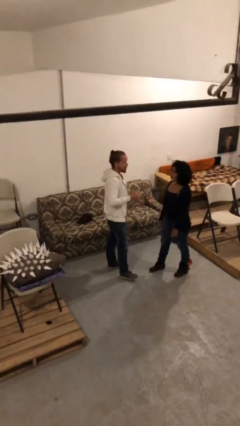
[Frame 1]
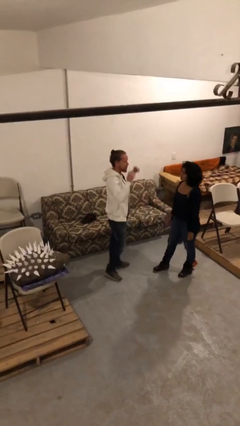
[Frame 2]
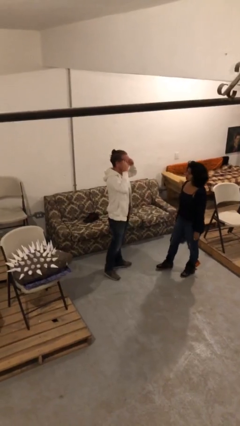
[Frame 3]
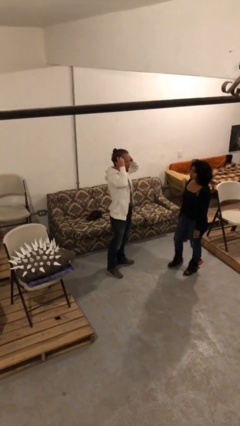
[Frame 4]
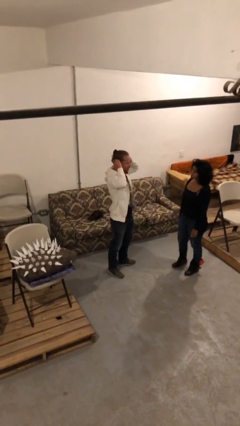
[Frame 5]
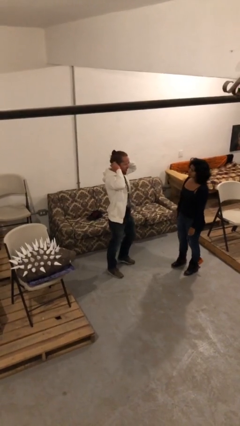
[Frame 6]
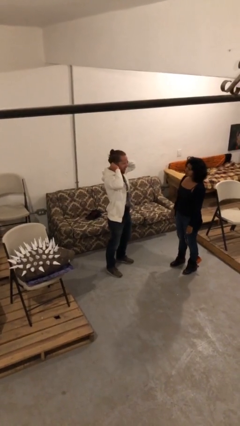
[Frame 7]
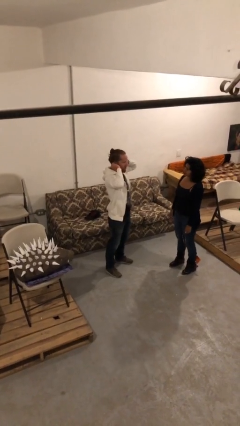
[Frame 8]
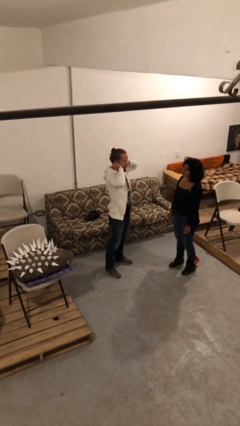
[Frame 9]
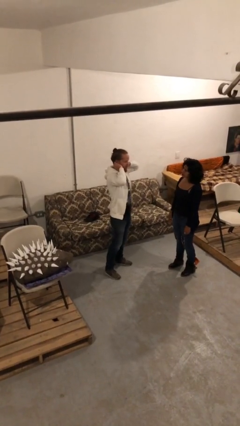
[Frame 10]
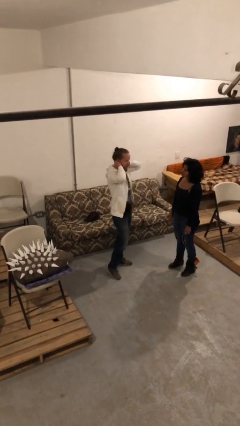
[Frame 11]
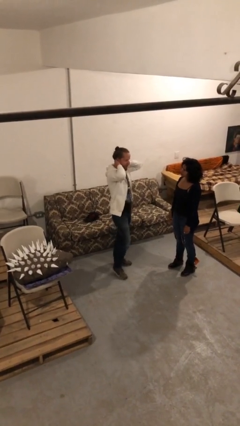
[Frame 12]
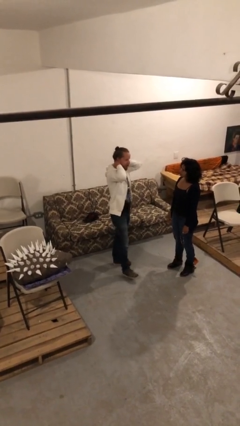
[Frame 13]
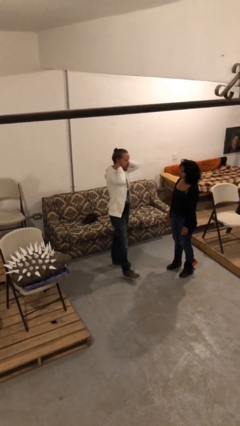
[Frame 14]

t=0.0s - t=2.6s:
person talks to person

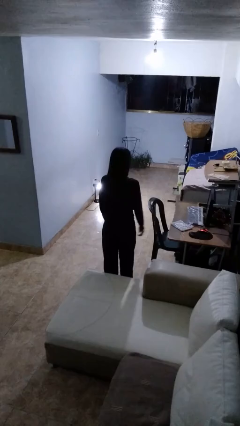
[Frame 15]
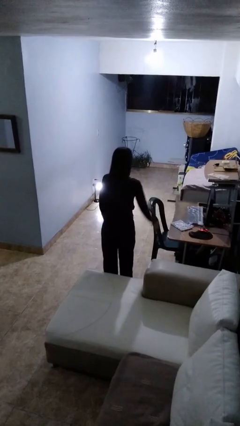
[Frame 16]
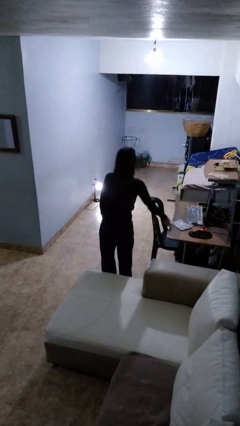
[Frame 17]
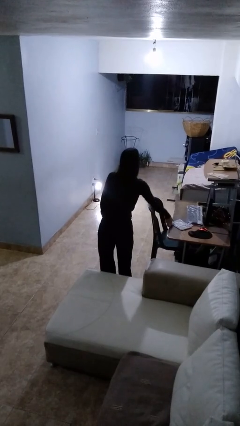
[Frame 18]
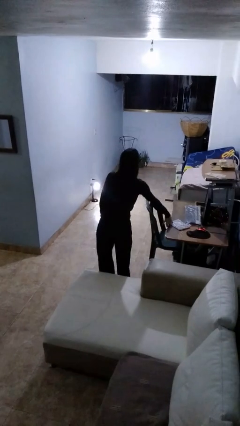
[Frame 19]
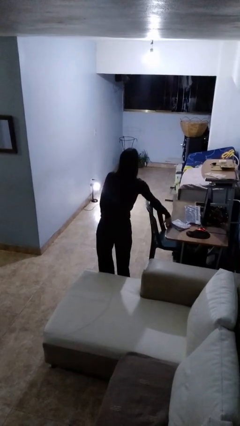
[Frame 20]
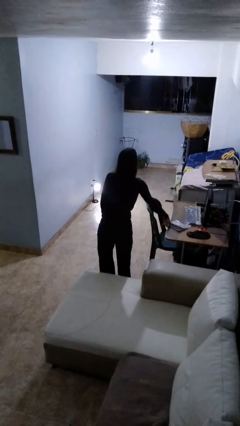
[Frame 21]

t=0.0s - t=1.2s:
person picks up object from table

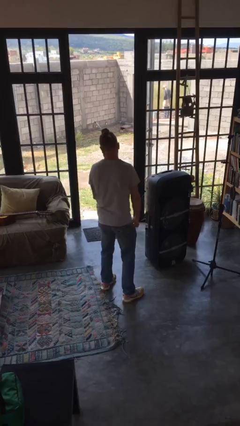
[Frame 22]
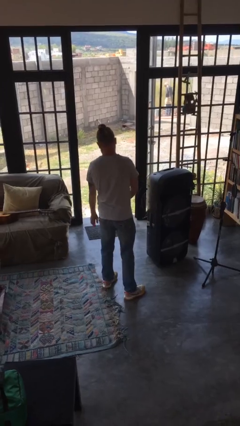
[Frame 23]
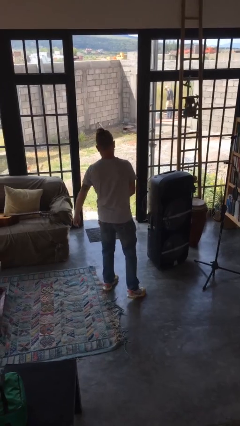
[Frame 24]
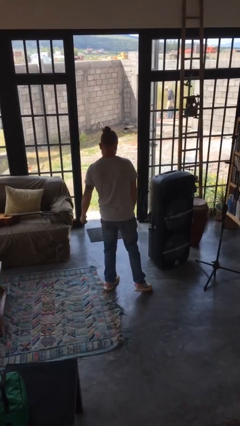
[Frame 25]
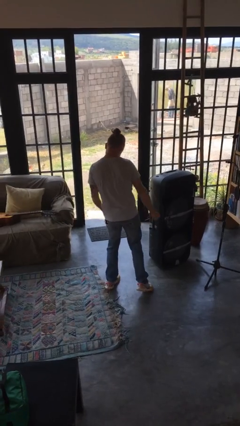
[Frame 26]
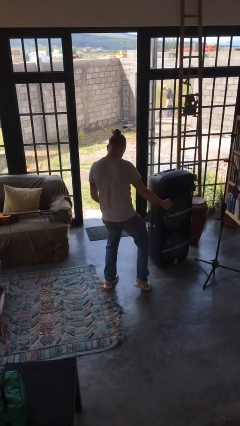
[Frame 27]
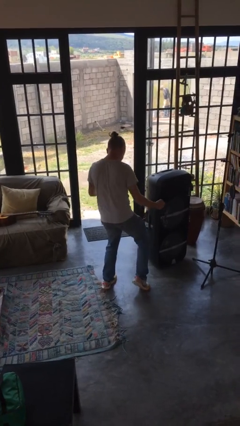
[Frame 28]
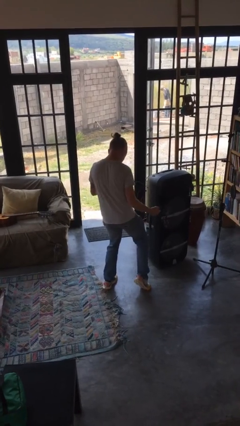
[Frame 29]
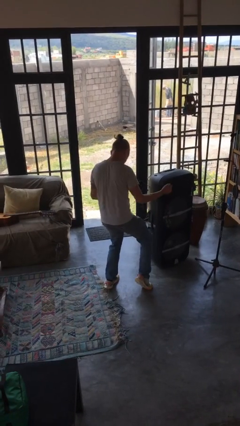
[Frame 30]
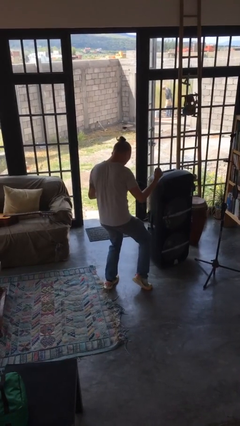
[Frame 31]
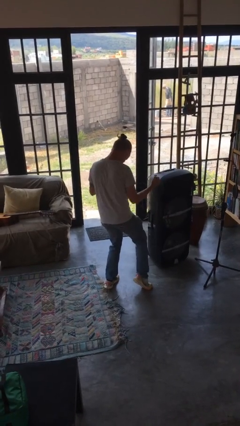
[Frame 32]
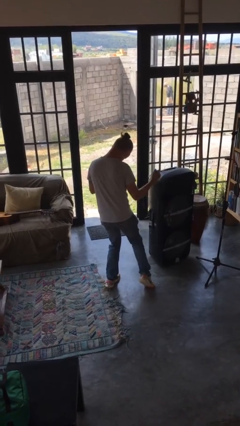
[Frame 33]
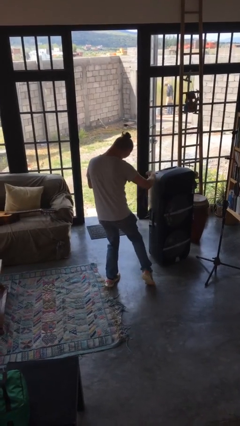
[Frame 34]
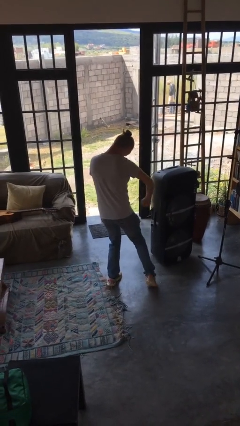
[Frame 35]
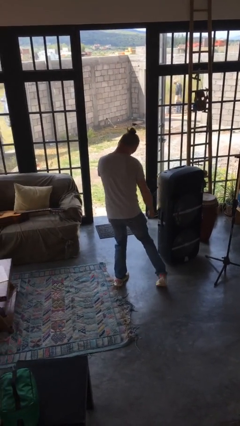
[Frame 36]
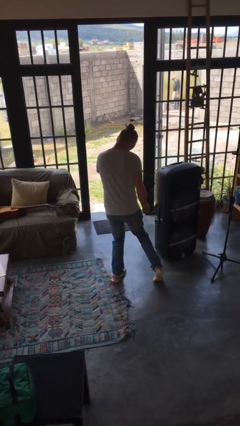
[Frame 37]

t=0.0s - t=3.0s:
person dances in place

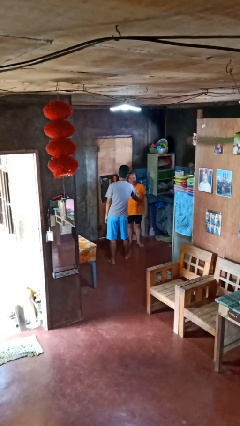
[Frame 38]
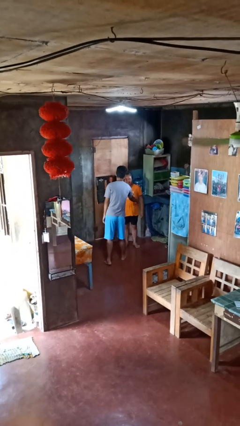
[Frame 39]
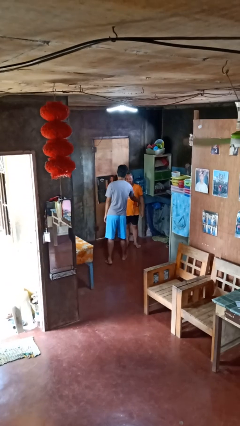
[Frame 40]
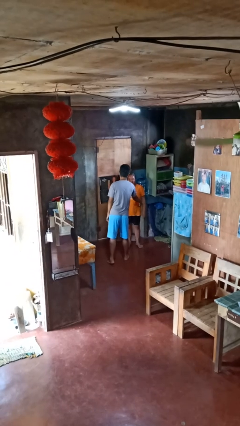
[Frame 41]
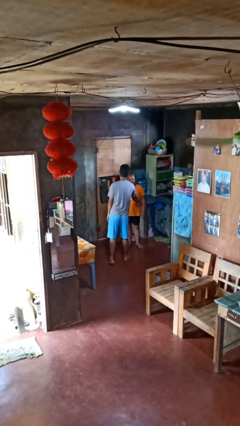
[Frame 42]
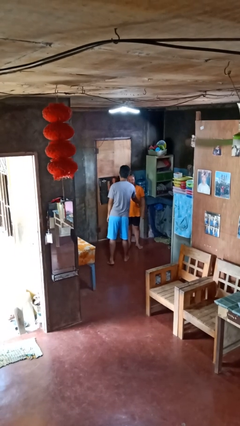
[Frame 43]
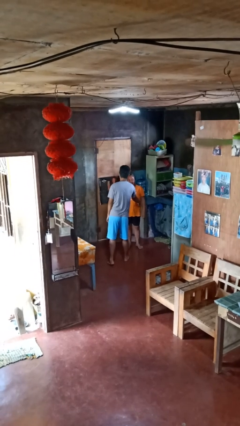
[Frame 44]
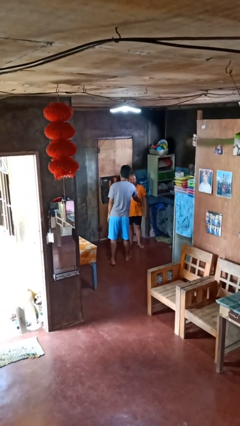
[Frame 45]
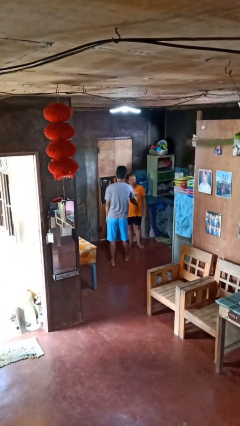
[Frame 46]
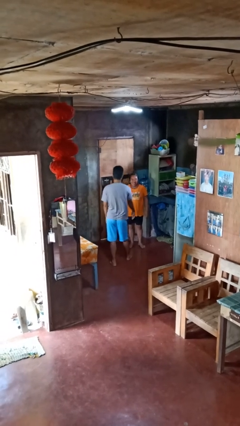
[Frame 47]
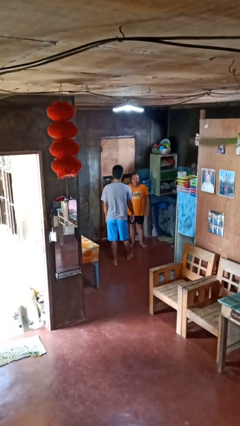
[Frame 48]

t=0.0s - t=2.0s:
person tickles person

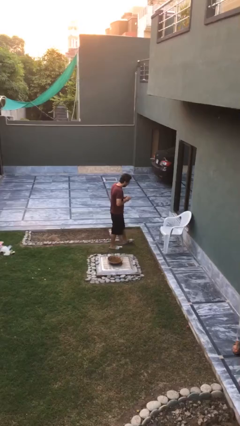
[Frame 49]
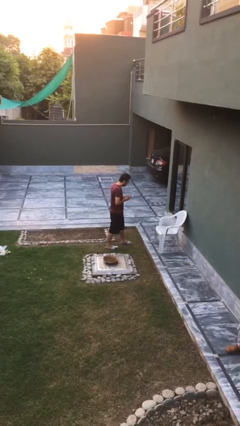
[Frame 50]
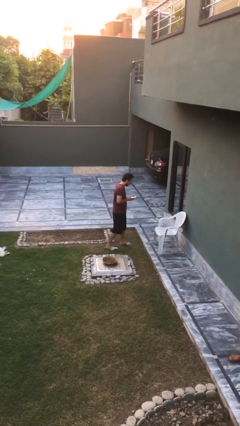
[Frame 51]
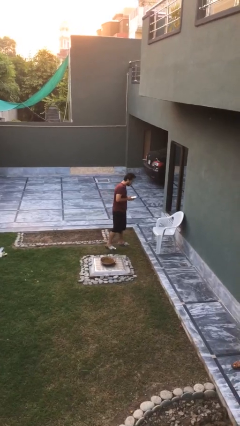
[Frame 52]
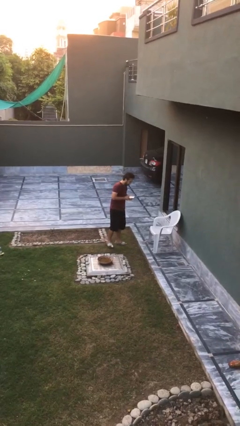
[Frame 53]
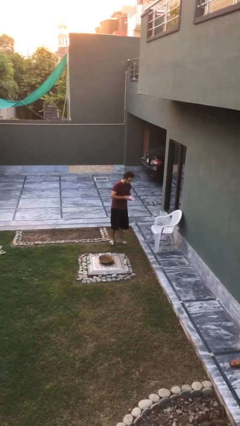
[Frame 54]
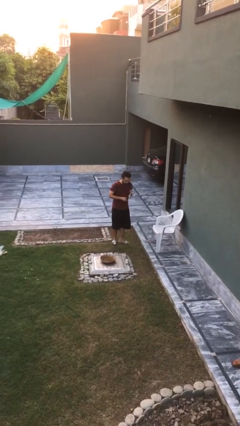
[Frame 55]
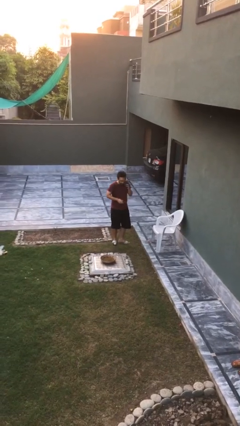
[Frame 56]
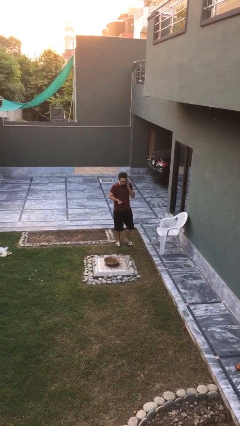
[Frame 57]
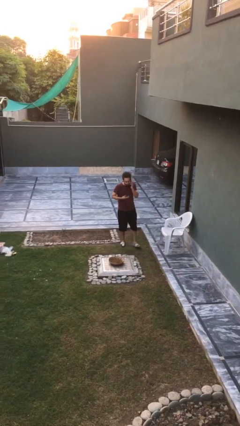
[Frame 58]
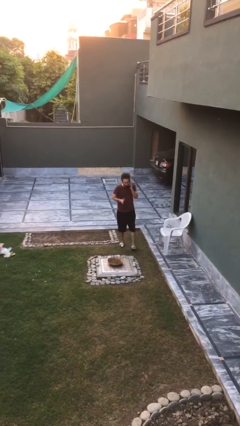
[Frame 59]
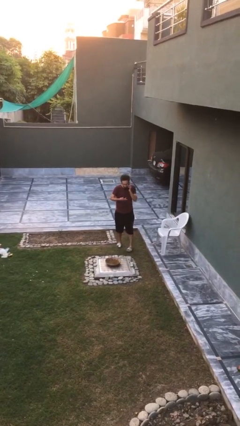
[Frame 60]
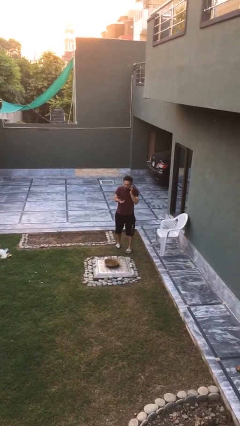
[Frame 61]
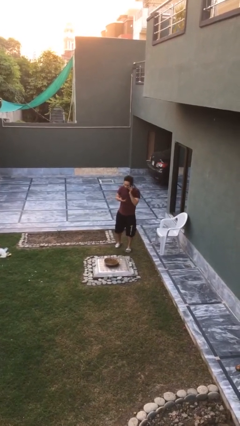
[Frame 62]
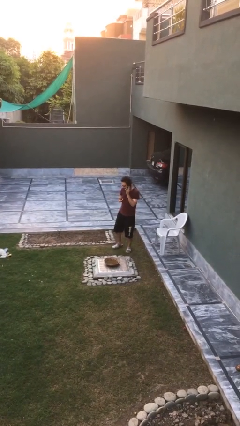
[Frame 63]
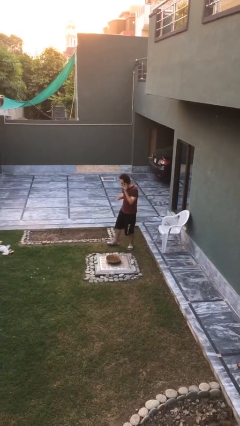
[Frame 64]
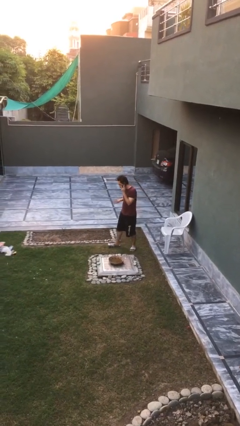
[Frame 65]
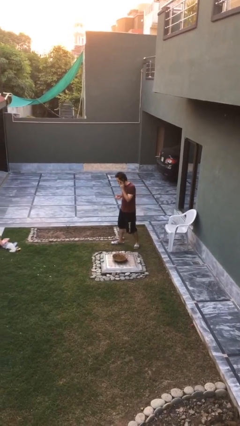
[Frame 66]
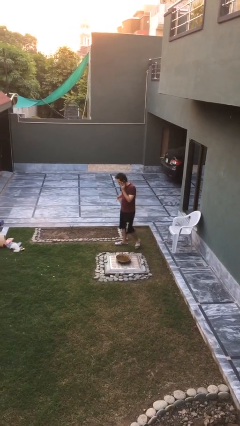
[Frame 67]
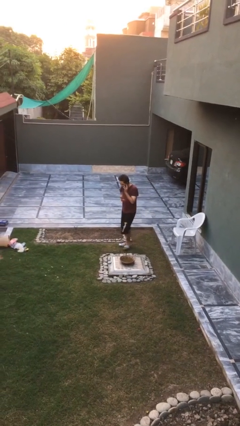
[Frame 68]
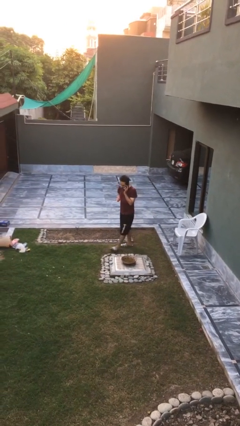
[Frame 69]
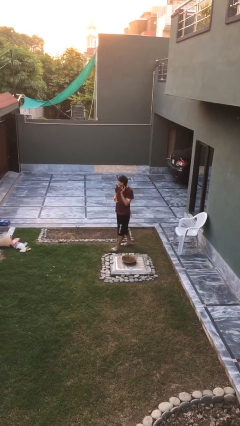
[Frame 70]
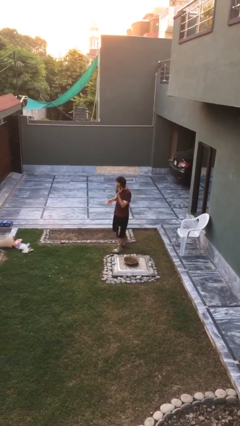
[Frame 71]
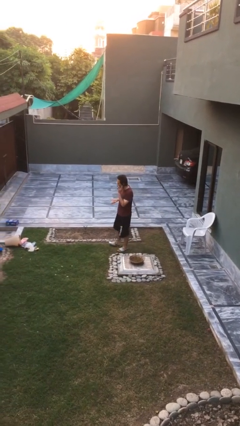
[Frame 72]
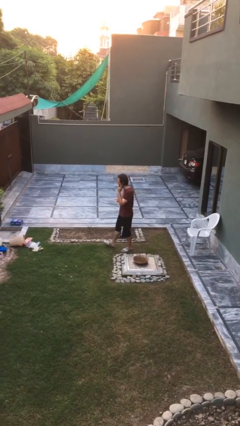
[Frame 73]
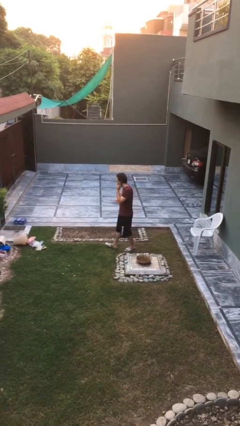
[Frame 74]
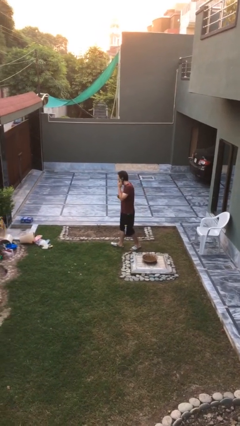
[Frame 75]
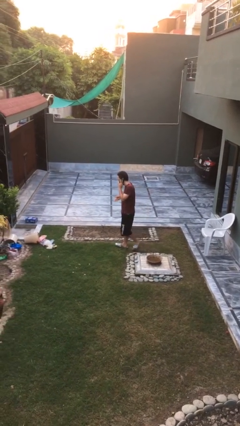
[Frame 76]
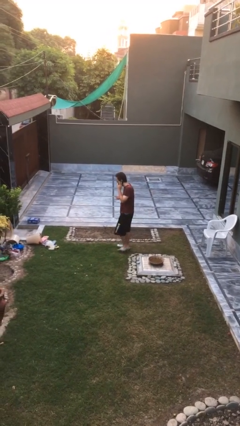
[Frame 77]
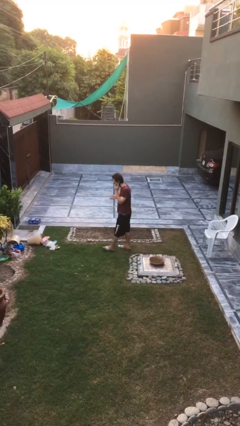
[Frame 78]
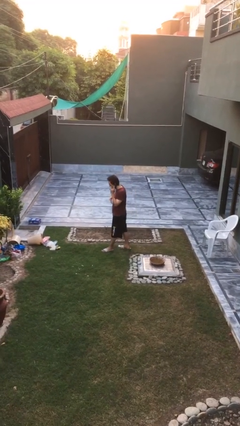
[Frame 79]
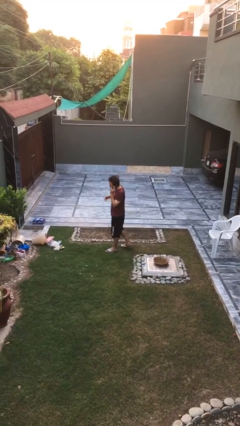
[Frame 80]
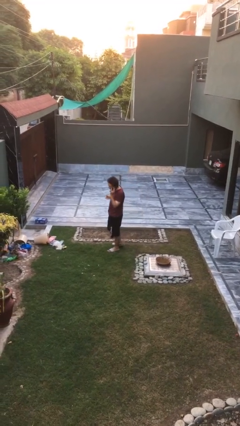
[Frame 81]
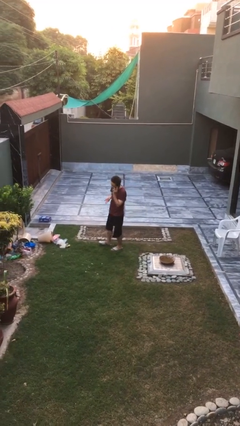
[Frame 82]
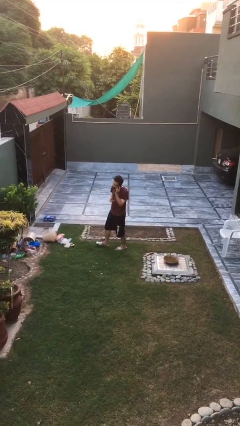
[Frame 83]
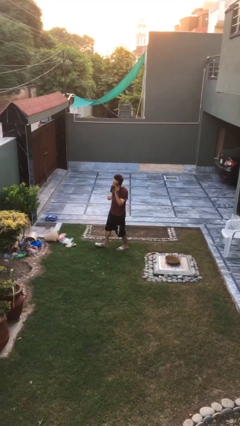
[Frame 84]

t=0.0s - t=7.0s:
person talks on phone

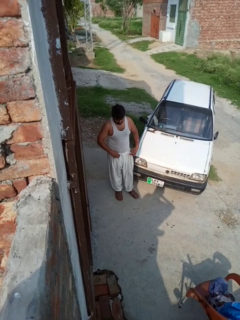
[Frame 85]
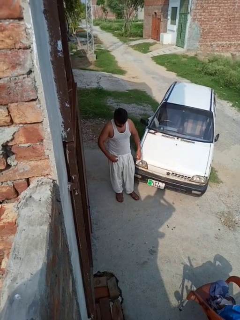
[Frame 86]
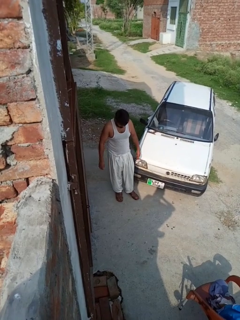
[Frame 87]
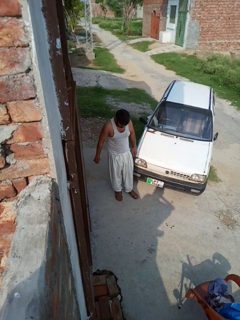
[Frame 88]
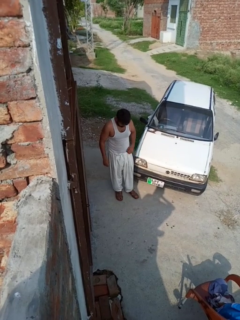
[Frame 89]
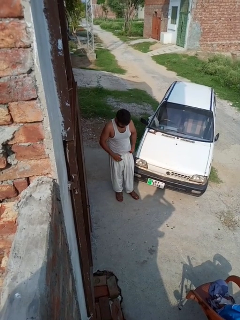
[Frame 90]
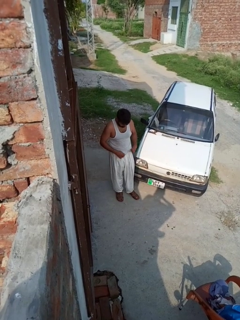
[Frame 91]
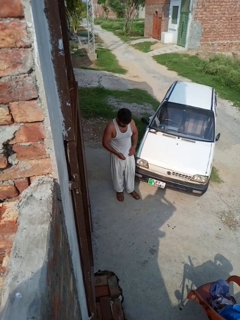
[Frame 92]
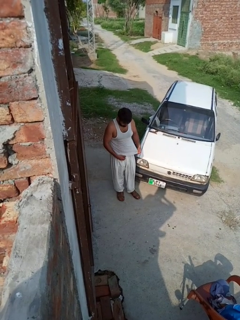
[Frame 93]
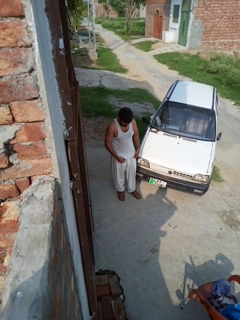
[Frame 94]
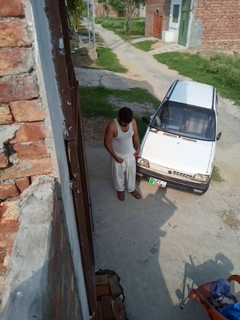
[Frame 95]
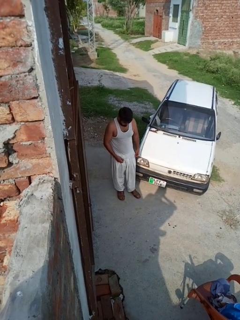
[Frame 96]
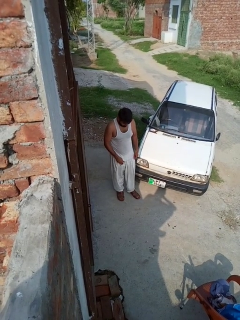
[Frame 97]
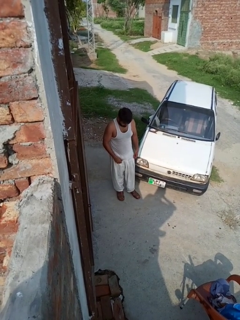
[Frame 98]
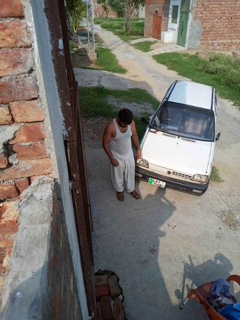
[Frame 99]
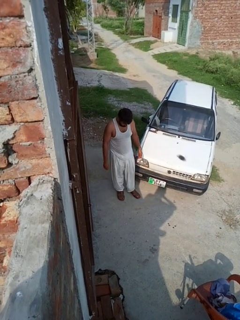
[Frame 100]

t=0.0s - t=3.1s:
person untucks shirt
